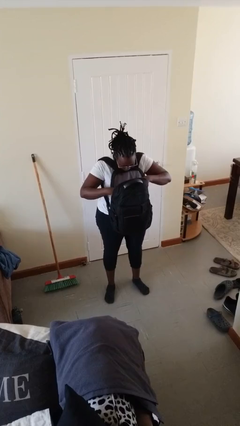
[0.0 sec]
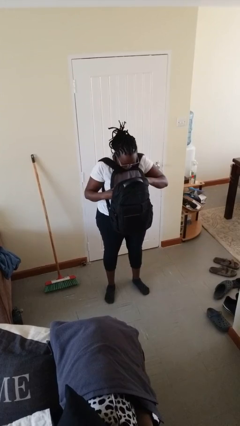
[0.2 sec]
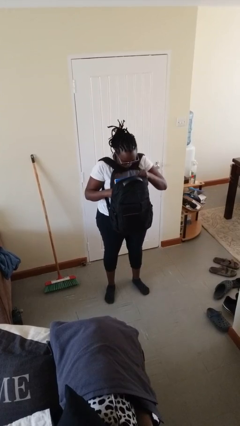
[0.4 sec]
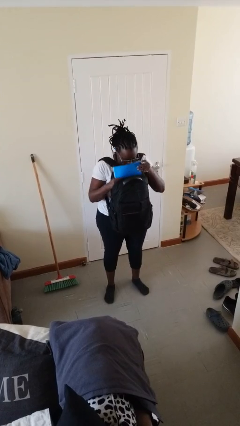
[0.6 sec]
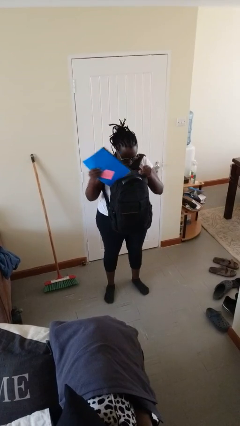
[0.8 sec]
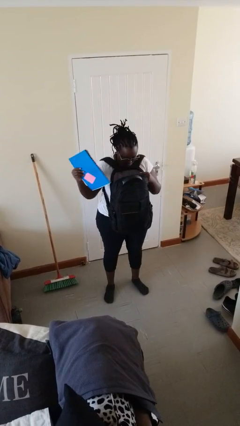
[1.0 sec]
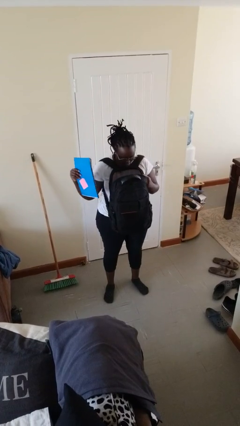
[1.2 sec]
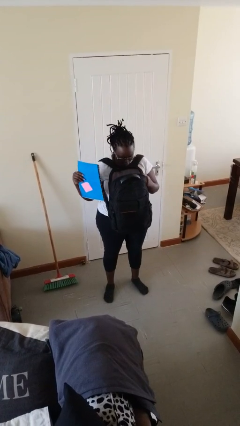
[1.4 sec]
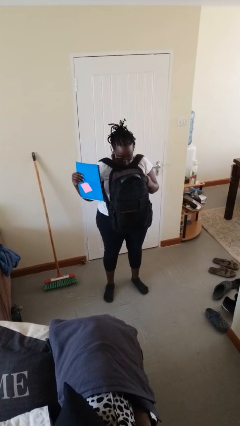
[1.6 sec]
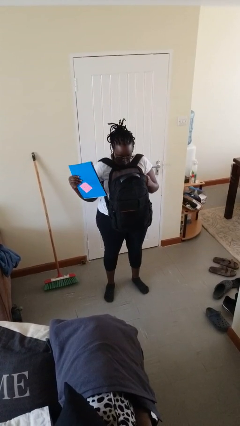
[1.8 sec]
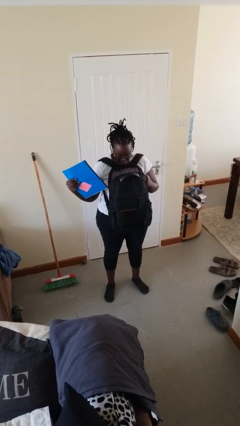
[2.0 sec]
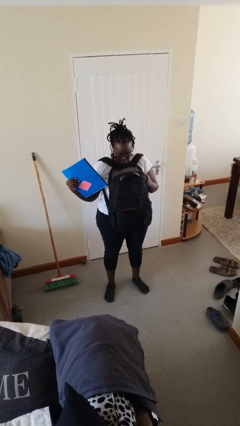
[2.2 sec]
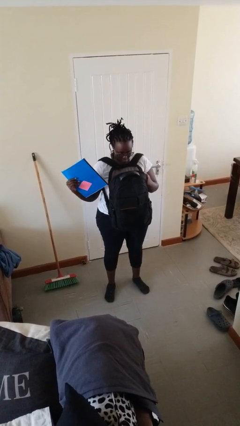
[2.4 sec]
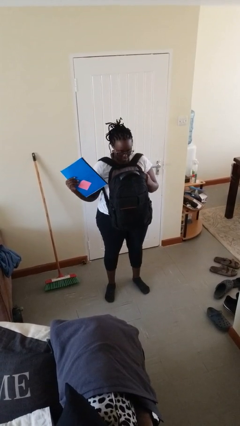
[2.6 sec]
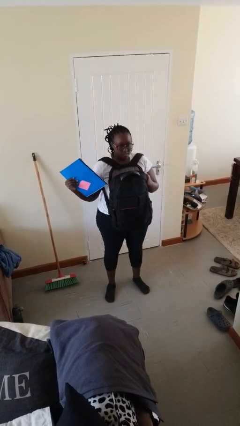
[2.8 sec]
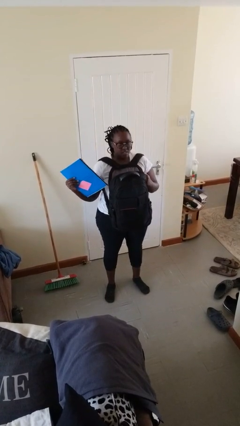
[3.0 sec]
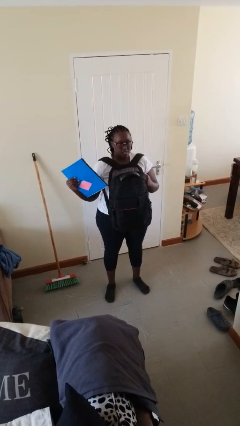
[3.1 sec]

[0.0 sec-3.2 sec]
person takes object from backpack

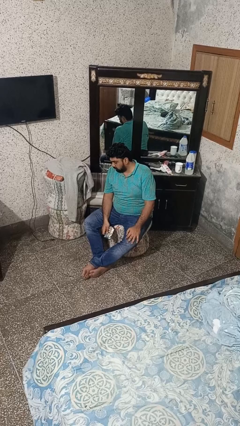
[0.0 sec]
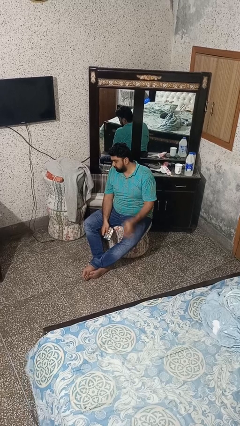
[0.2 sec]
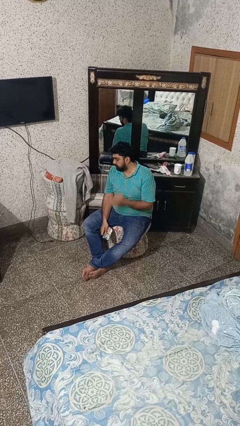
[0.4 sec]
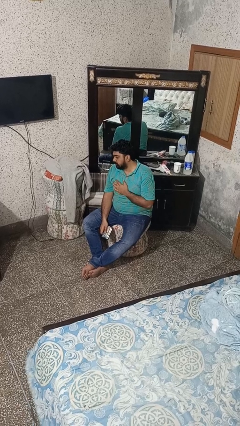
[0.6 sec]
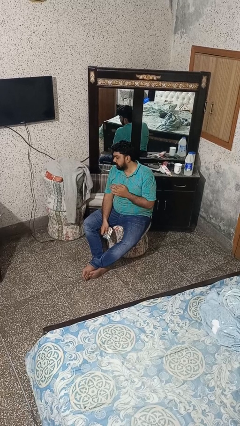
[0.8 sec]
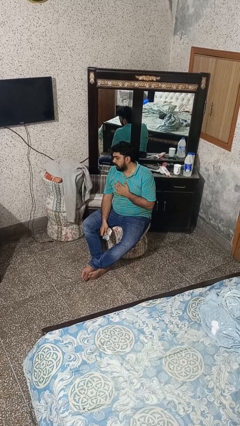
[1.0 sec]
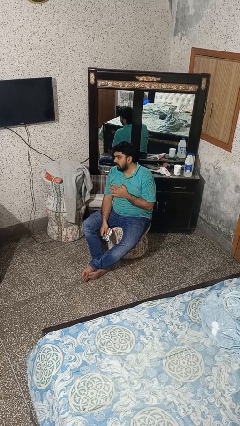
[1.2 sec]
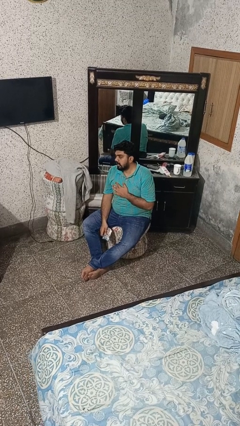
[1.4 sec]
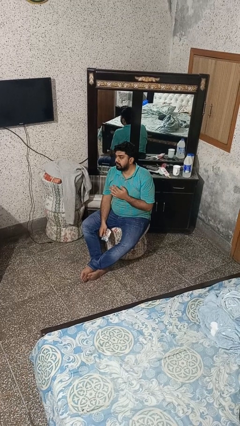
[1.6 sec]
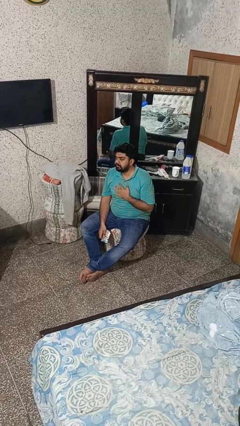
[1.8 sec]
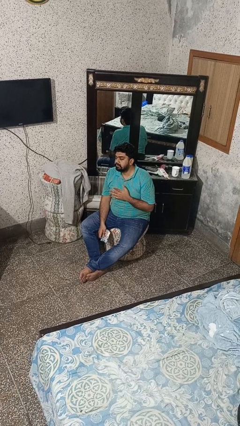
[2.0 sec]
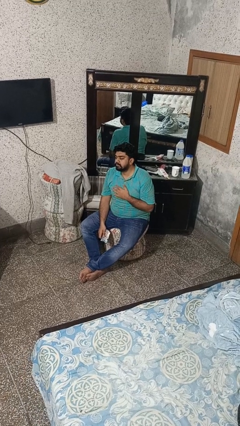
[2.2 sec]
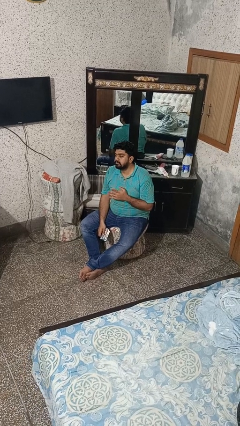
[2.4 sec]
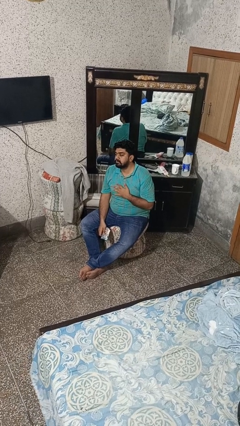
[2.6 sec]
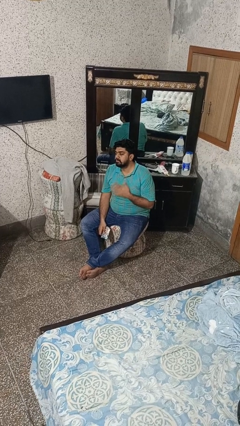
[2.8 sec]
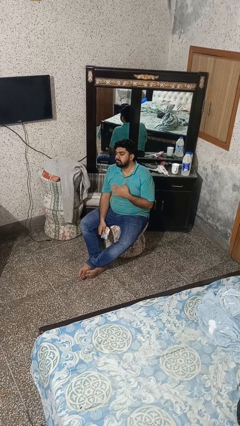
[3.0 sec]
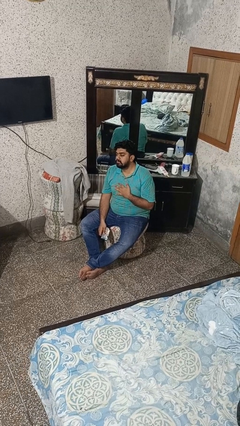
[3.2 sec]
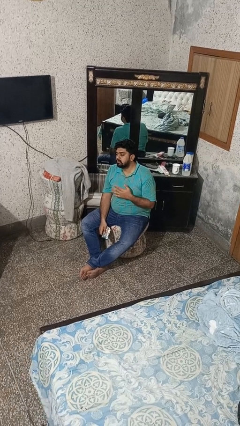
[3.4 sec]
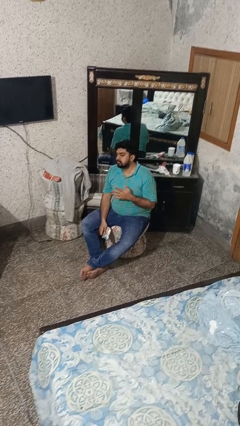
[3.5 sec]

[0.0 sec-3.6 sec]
person drums on chest

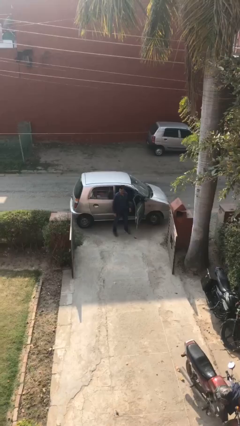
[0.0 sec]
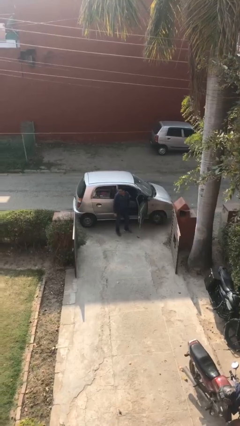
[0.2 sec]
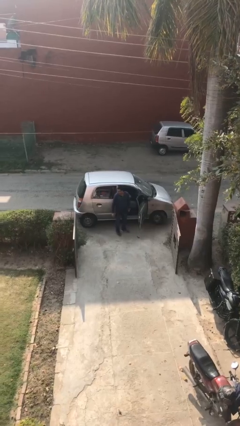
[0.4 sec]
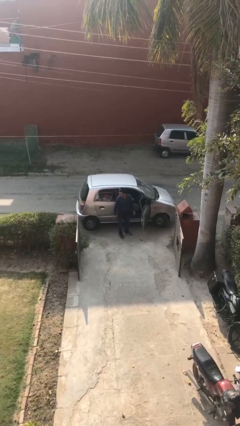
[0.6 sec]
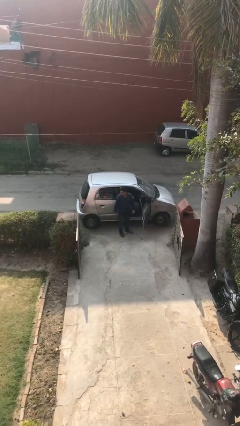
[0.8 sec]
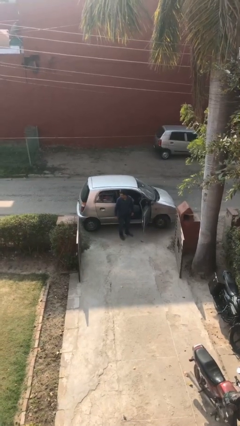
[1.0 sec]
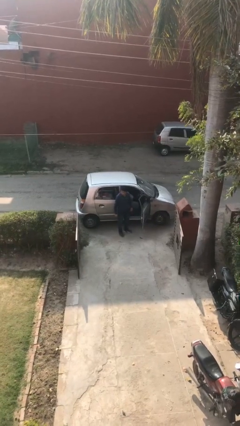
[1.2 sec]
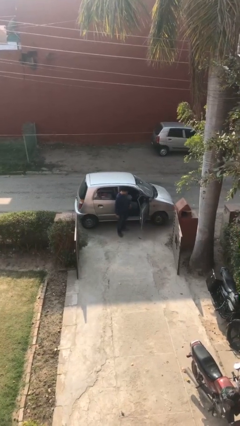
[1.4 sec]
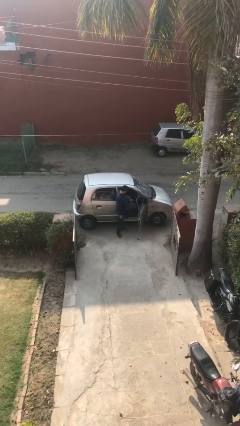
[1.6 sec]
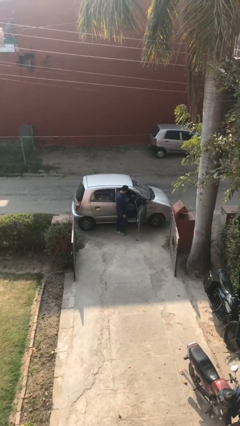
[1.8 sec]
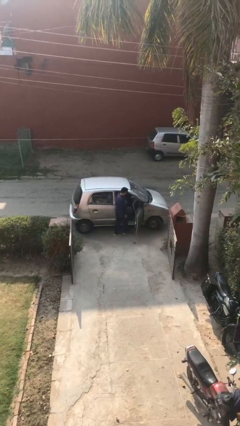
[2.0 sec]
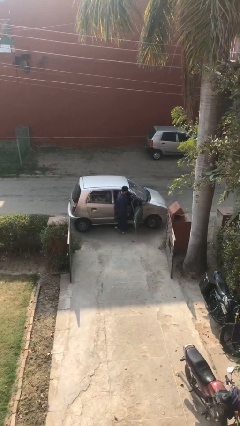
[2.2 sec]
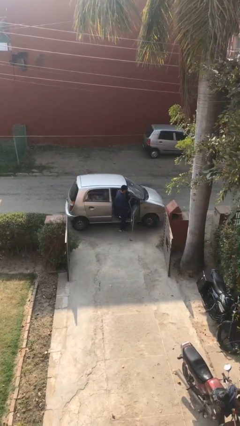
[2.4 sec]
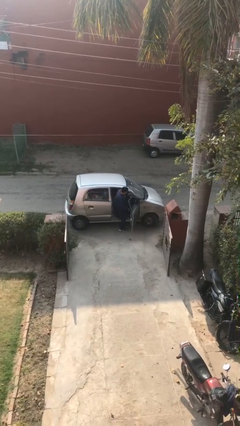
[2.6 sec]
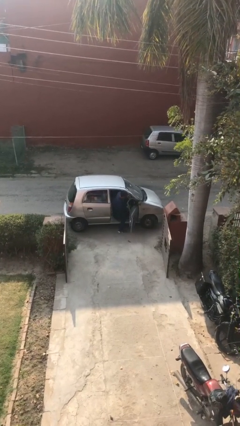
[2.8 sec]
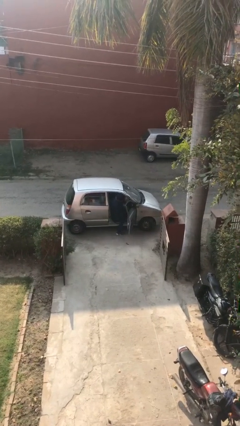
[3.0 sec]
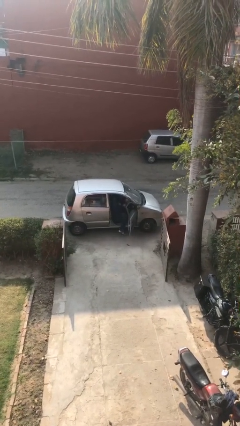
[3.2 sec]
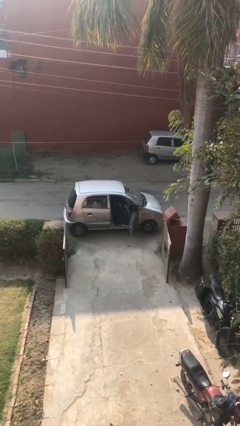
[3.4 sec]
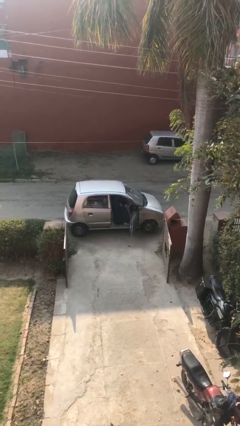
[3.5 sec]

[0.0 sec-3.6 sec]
person enters car

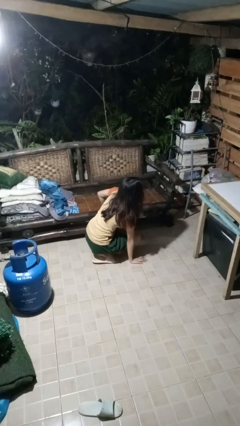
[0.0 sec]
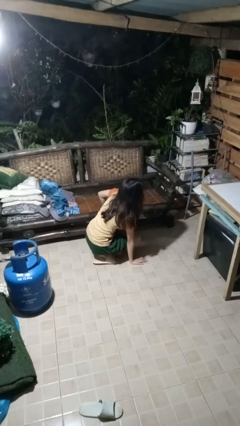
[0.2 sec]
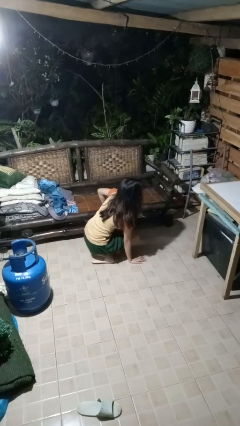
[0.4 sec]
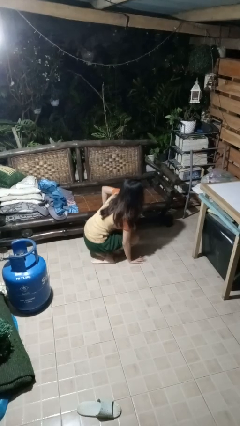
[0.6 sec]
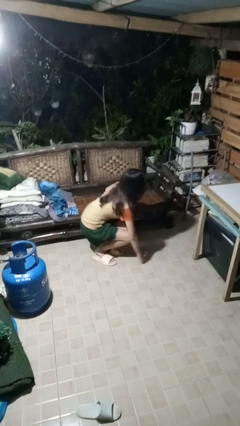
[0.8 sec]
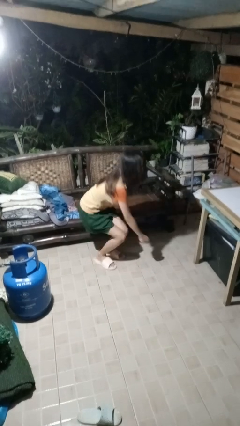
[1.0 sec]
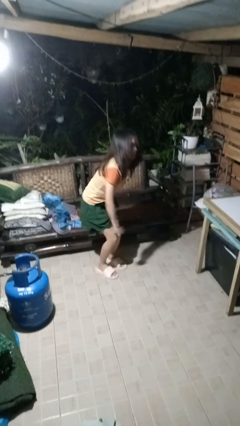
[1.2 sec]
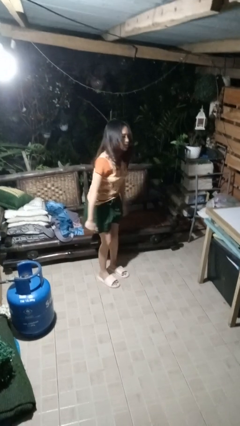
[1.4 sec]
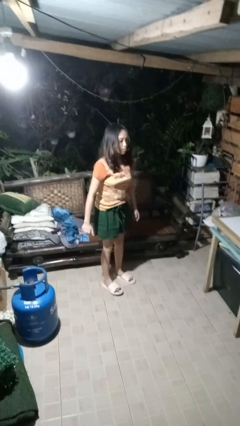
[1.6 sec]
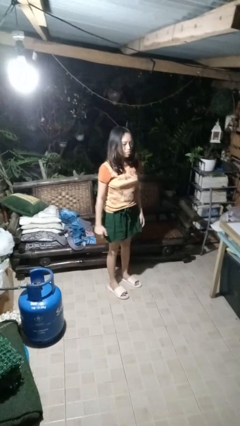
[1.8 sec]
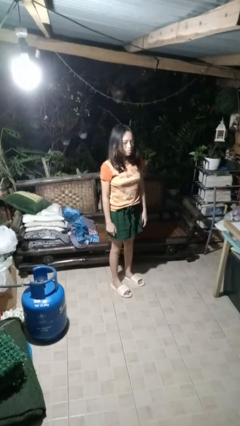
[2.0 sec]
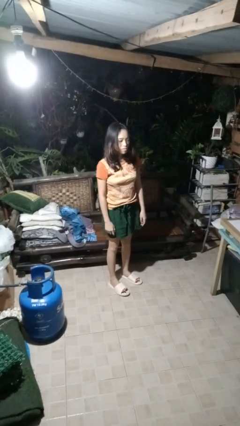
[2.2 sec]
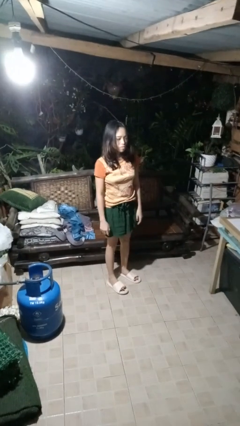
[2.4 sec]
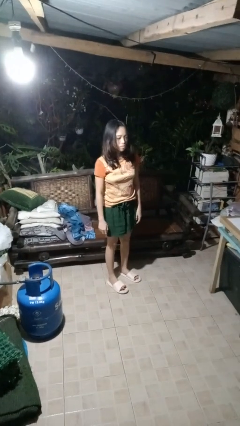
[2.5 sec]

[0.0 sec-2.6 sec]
person stands up from floor

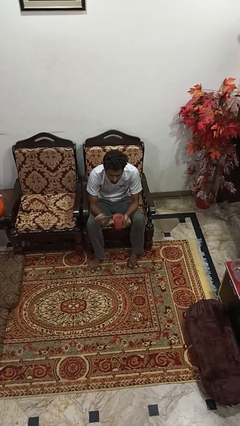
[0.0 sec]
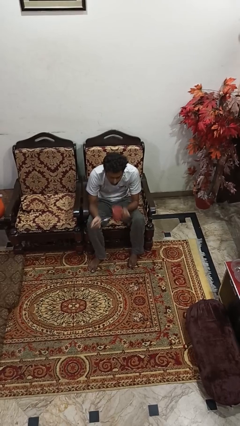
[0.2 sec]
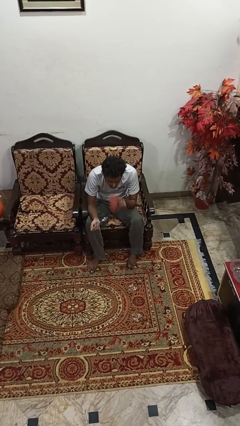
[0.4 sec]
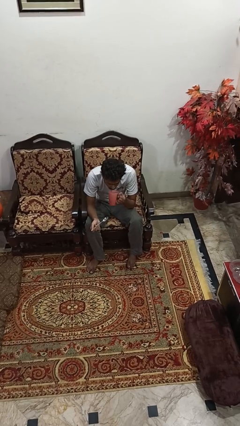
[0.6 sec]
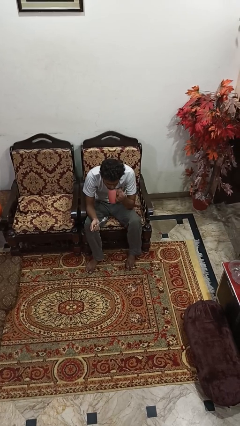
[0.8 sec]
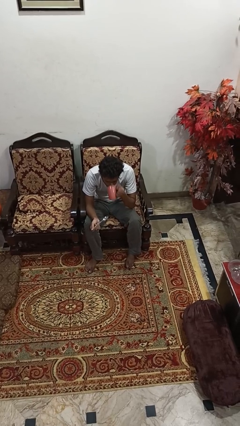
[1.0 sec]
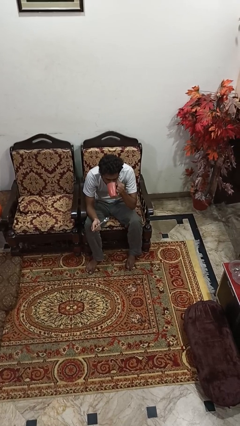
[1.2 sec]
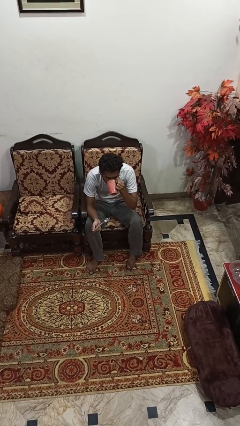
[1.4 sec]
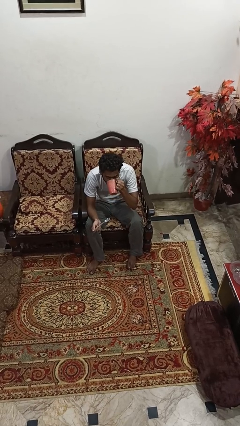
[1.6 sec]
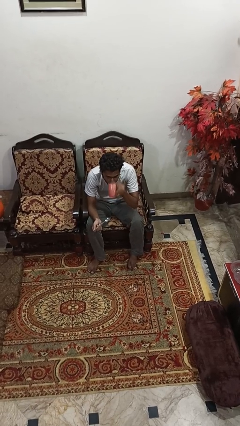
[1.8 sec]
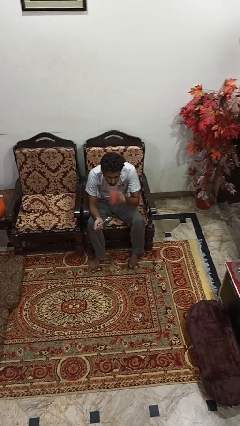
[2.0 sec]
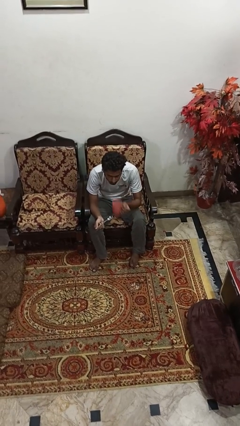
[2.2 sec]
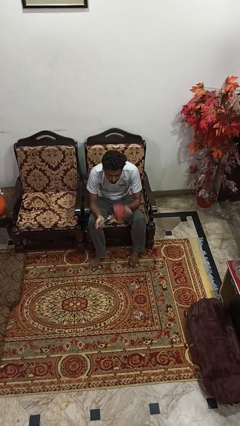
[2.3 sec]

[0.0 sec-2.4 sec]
person drinks from mug

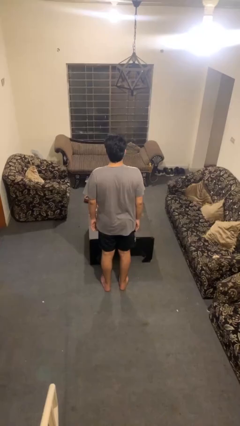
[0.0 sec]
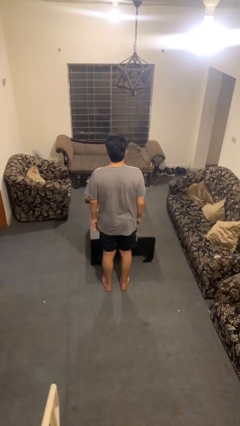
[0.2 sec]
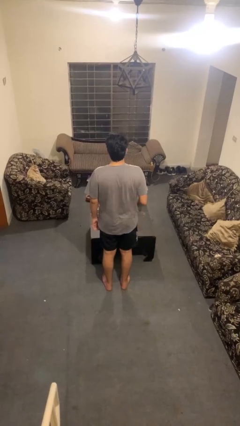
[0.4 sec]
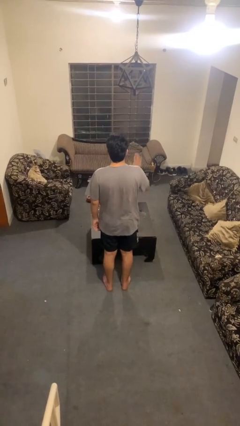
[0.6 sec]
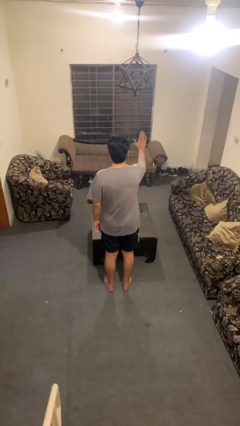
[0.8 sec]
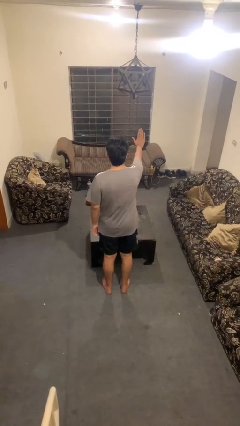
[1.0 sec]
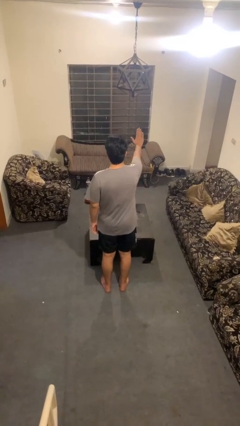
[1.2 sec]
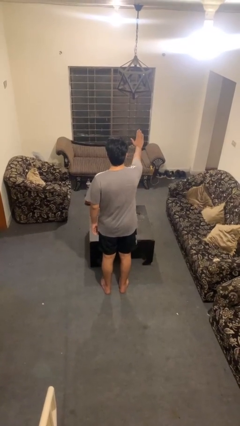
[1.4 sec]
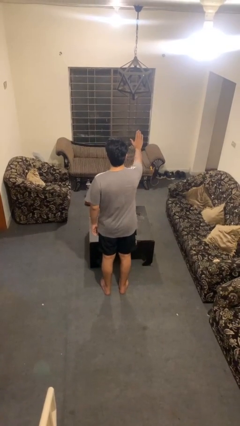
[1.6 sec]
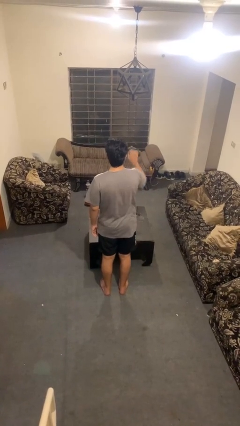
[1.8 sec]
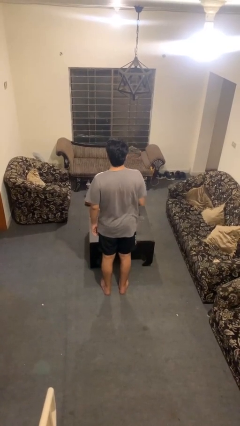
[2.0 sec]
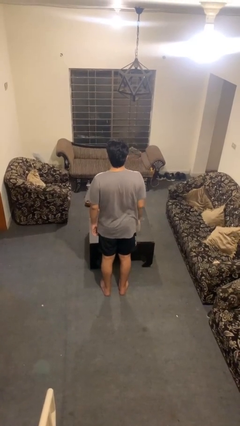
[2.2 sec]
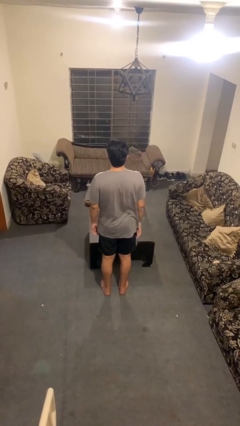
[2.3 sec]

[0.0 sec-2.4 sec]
person gestures stop
